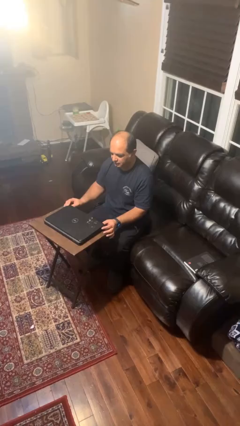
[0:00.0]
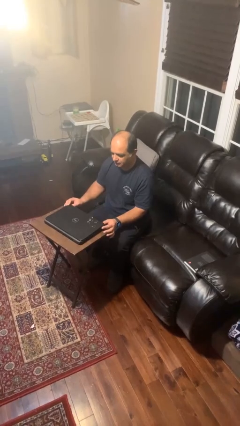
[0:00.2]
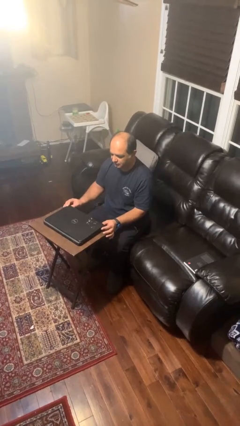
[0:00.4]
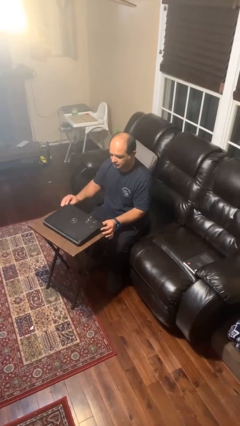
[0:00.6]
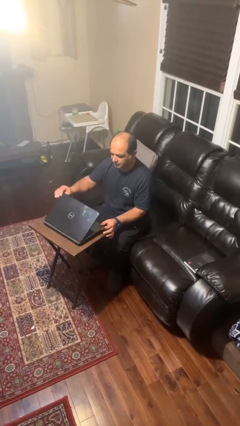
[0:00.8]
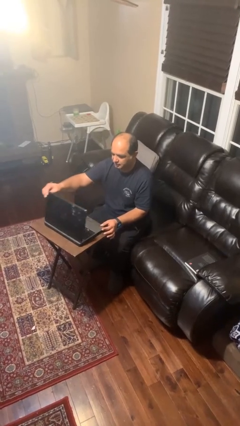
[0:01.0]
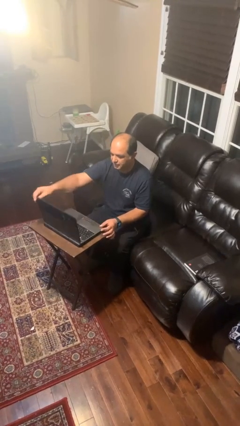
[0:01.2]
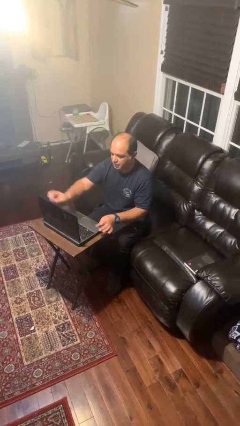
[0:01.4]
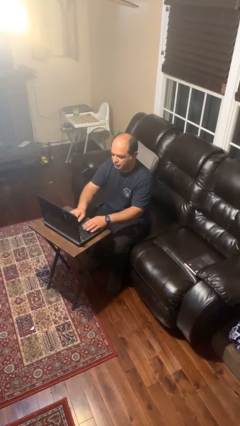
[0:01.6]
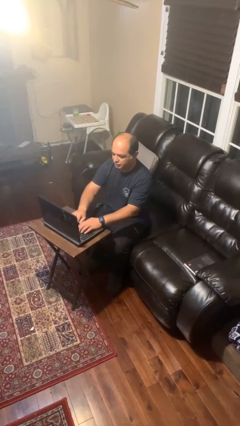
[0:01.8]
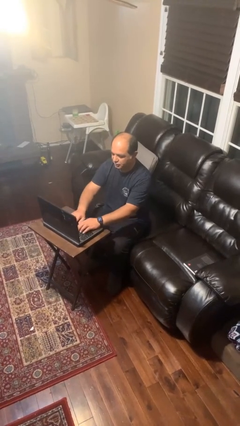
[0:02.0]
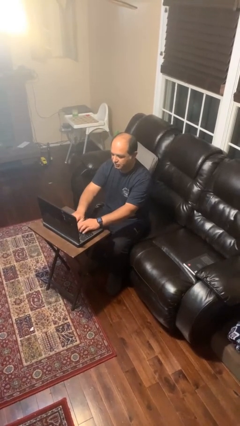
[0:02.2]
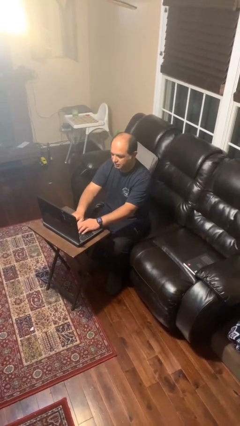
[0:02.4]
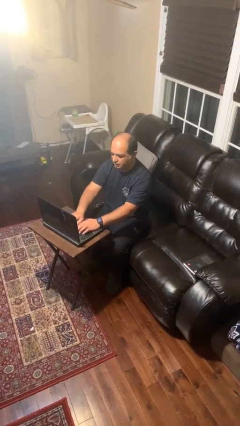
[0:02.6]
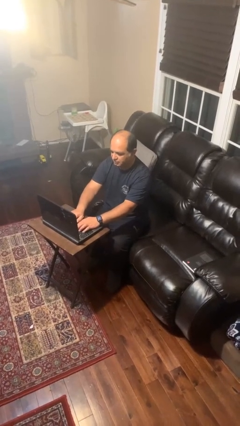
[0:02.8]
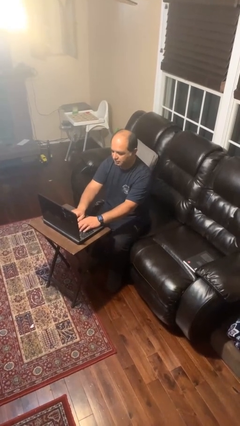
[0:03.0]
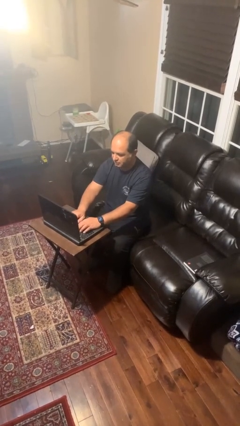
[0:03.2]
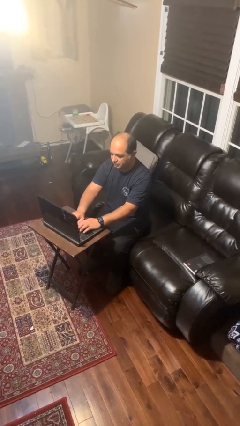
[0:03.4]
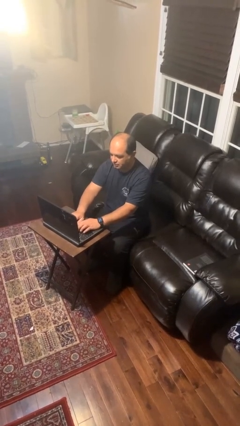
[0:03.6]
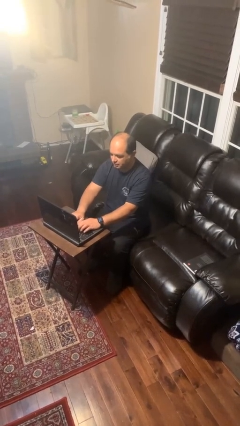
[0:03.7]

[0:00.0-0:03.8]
person interacts with laptop

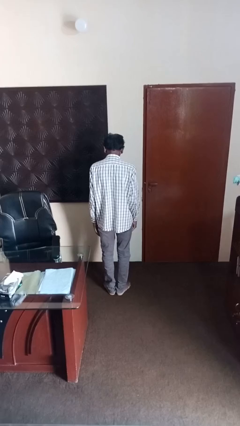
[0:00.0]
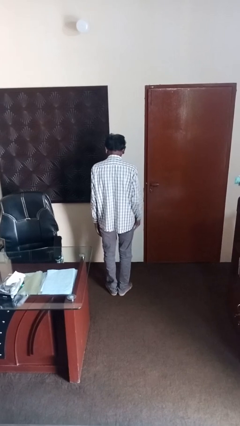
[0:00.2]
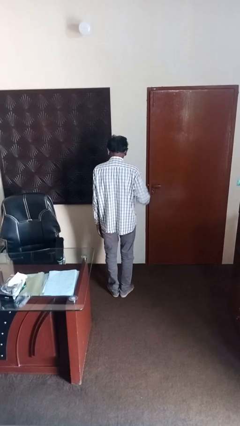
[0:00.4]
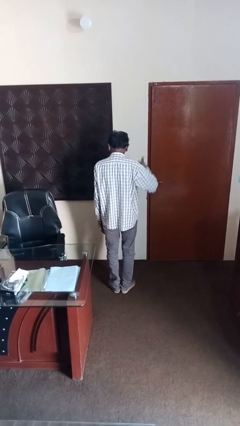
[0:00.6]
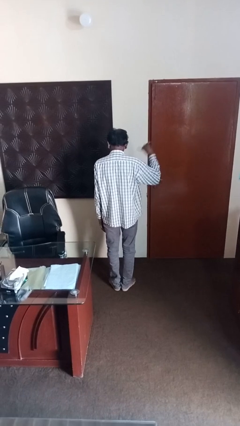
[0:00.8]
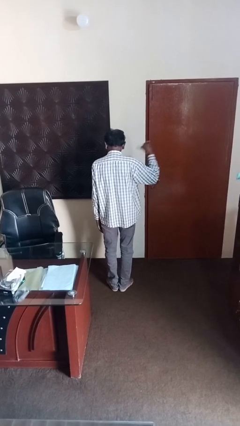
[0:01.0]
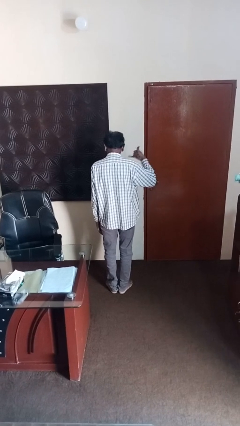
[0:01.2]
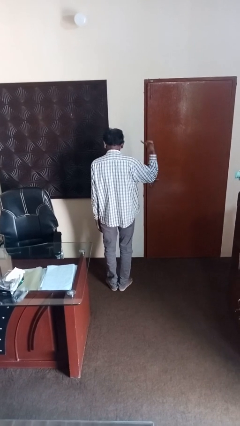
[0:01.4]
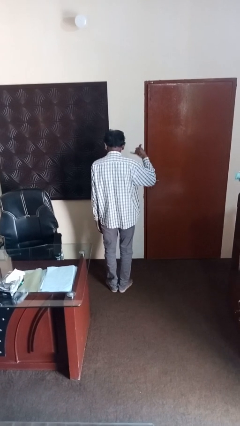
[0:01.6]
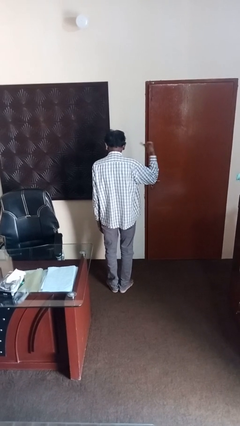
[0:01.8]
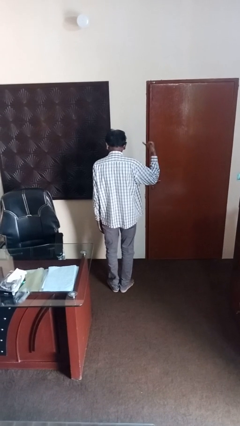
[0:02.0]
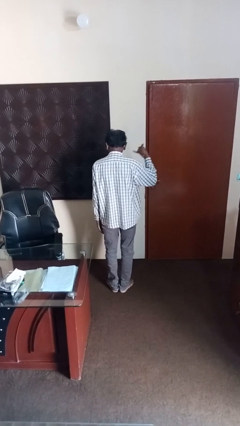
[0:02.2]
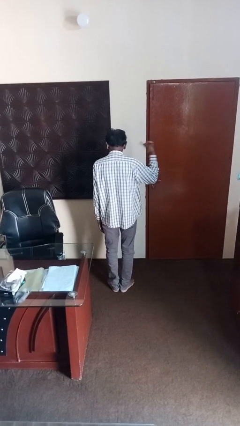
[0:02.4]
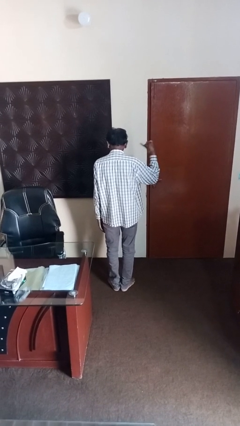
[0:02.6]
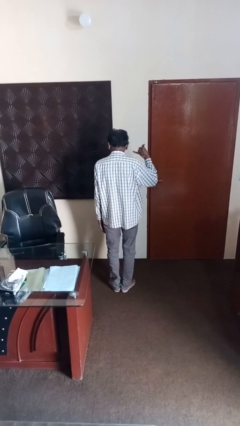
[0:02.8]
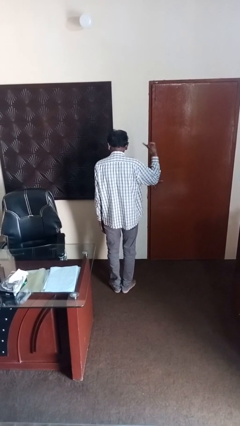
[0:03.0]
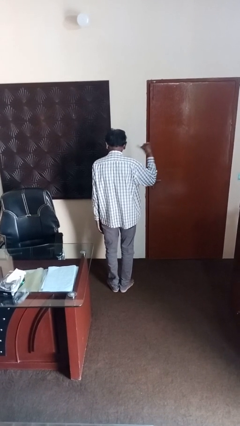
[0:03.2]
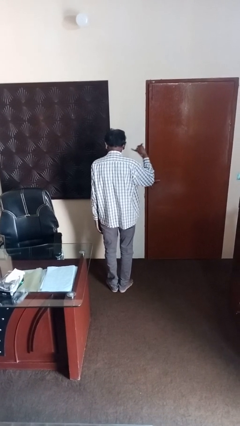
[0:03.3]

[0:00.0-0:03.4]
person gestures hang loose

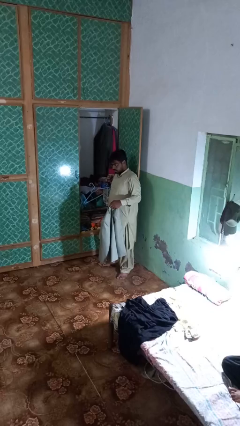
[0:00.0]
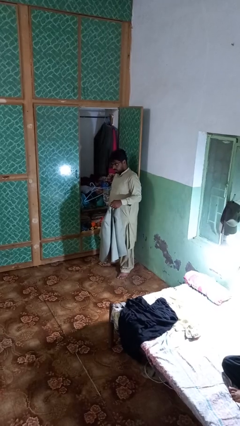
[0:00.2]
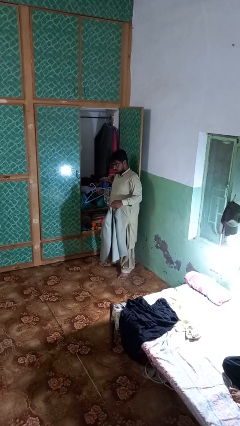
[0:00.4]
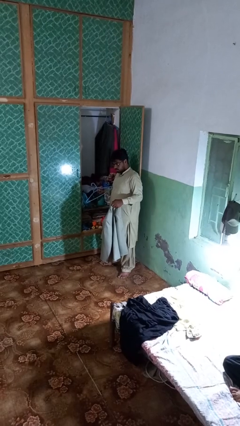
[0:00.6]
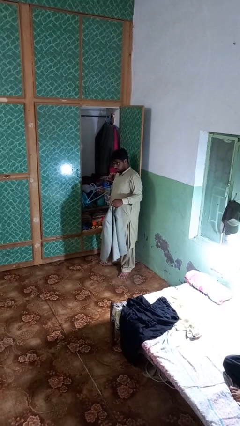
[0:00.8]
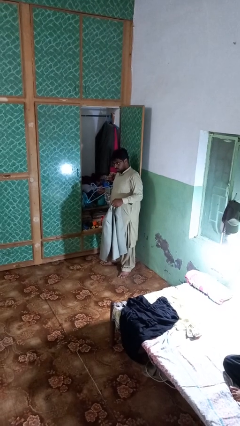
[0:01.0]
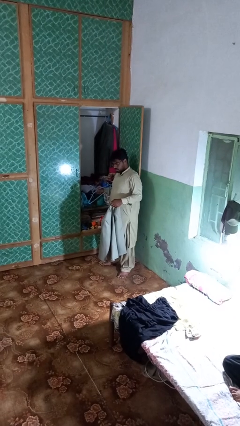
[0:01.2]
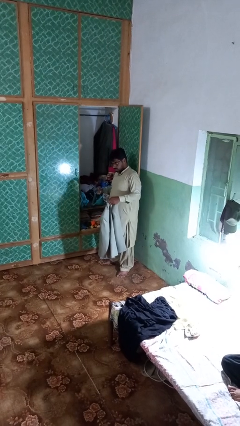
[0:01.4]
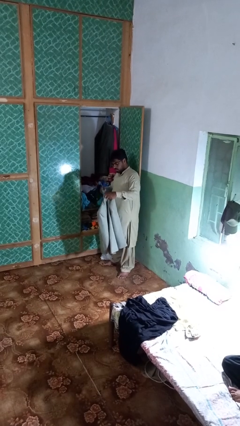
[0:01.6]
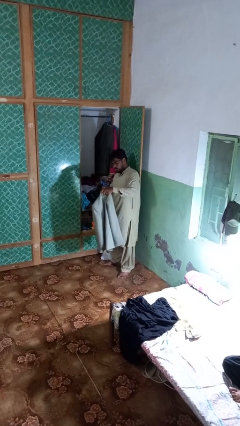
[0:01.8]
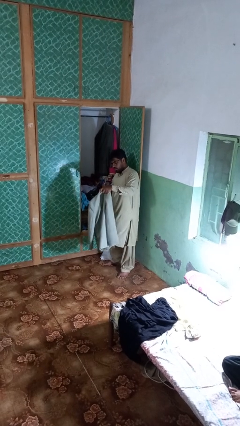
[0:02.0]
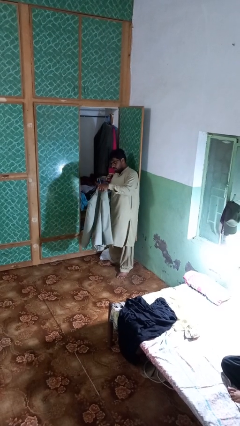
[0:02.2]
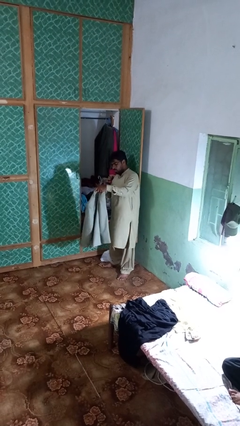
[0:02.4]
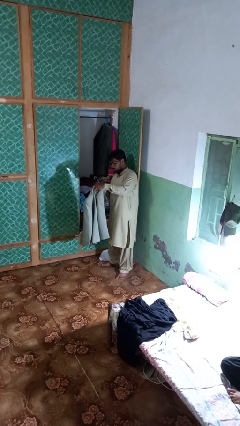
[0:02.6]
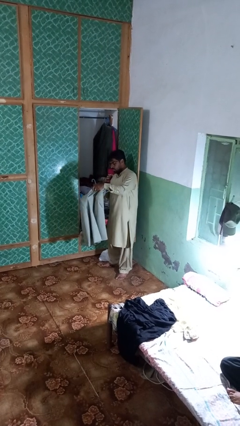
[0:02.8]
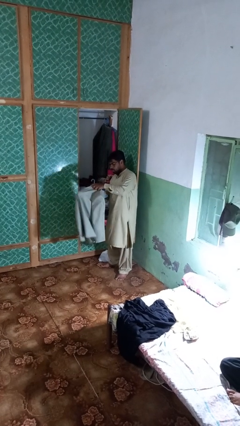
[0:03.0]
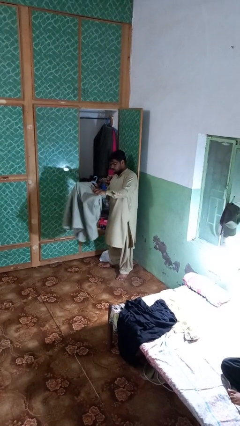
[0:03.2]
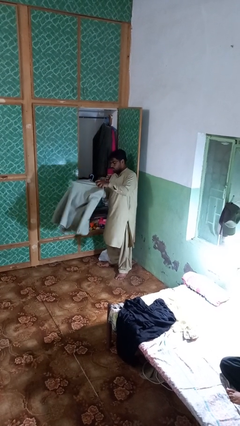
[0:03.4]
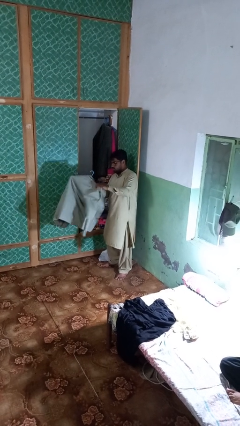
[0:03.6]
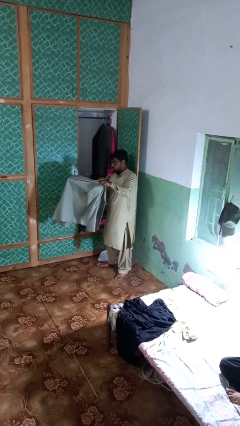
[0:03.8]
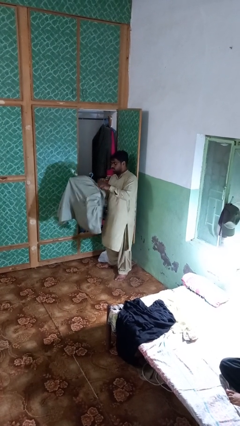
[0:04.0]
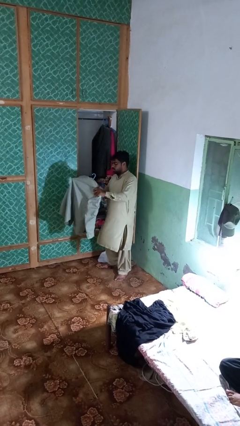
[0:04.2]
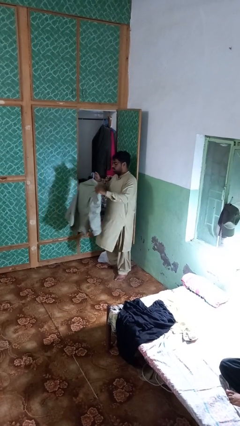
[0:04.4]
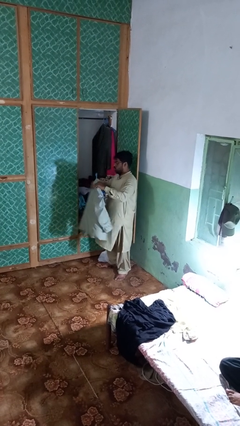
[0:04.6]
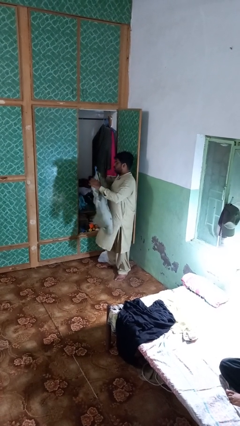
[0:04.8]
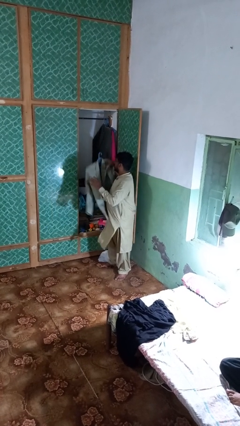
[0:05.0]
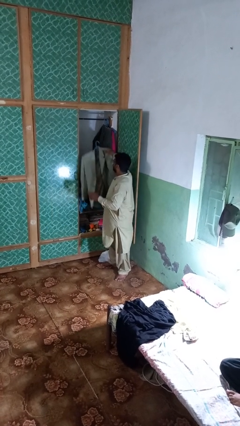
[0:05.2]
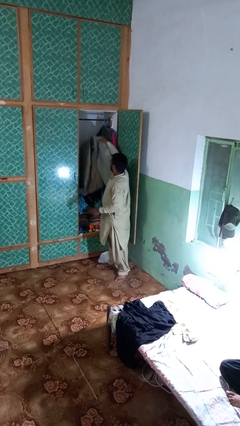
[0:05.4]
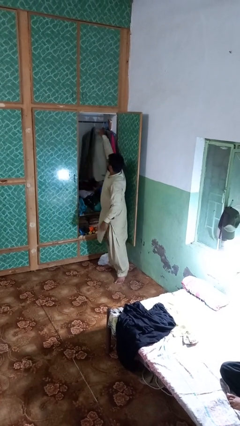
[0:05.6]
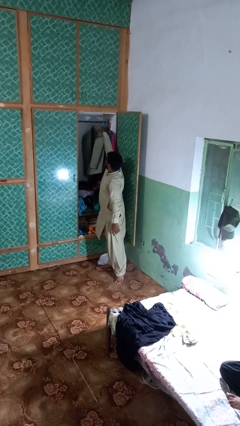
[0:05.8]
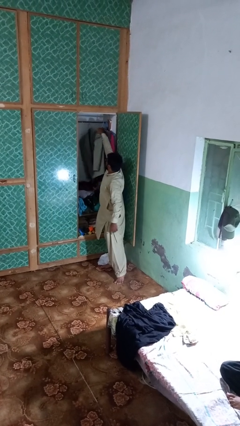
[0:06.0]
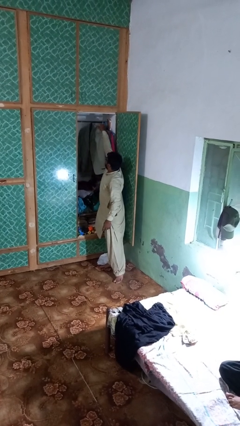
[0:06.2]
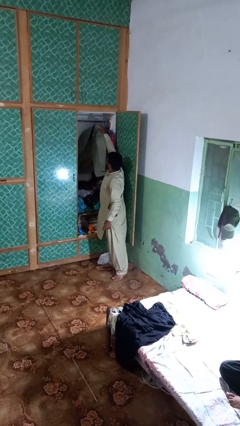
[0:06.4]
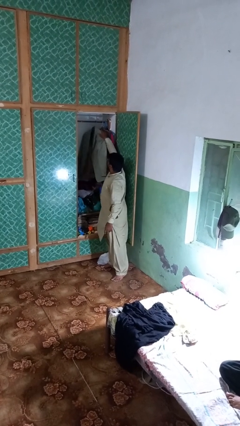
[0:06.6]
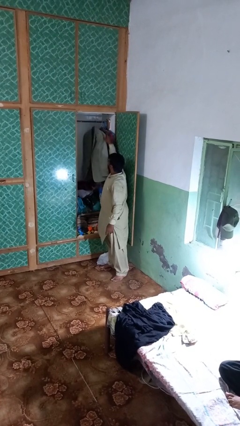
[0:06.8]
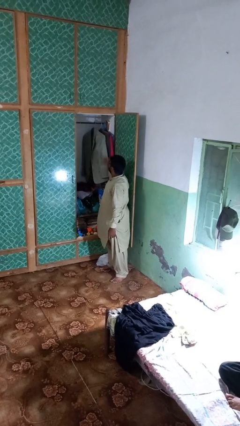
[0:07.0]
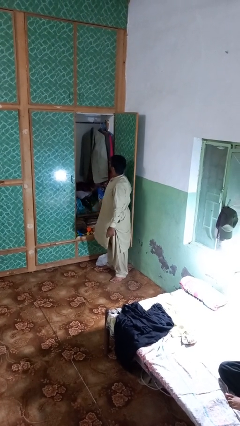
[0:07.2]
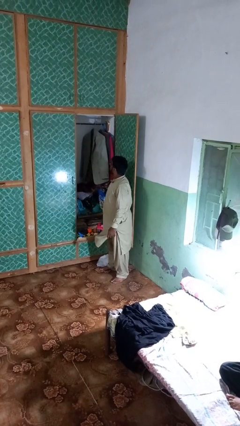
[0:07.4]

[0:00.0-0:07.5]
person puts clothes into closet

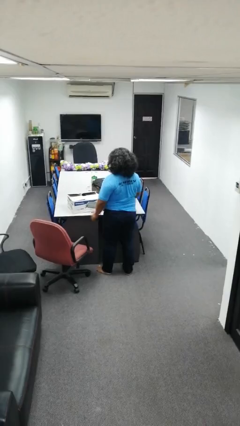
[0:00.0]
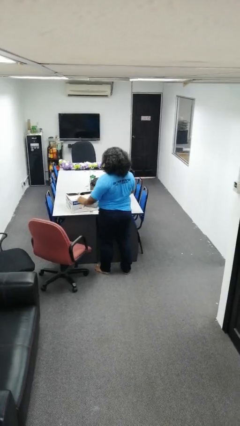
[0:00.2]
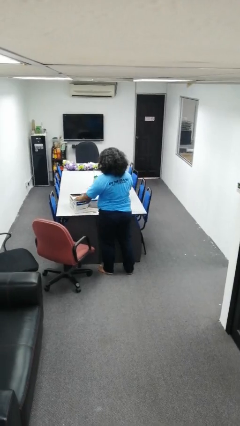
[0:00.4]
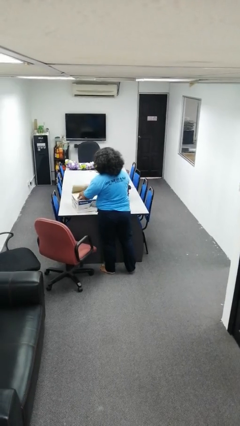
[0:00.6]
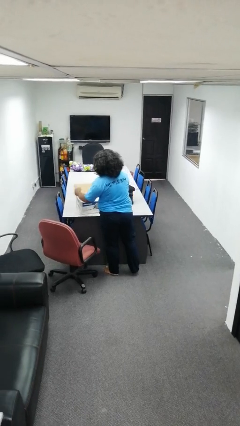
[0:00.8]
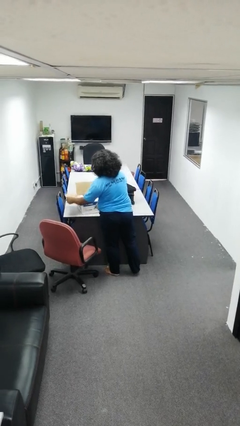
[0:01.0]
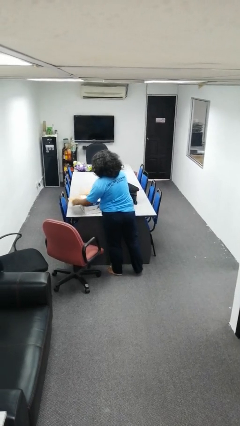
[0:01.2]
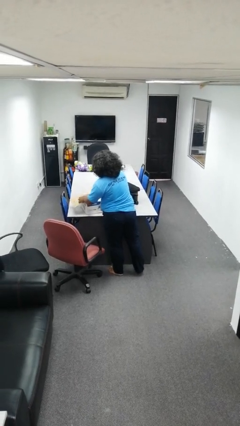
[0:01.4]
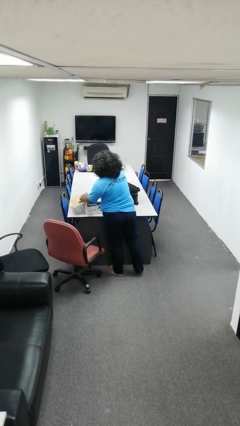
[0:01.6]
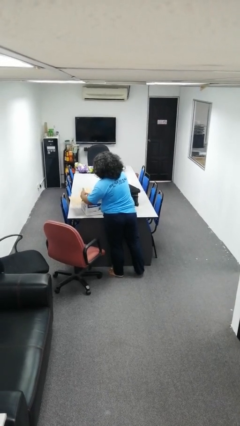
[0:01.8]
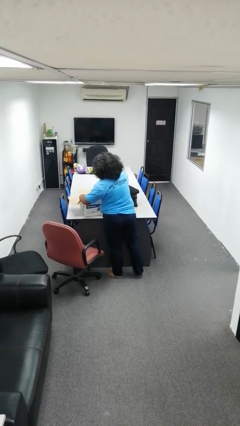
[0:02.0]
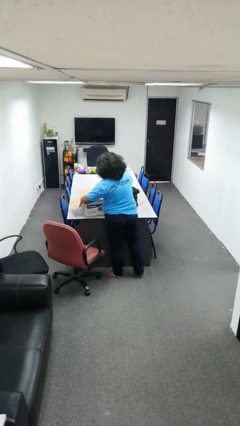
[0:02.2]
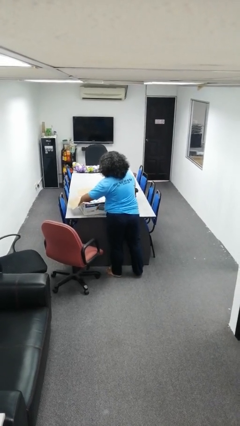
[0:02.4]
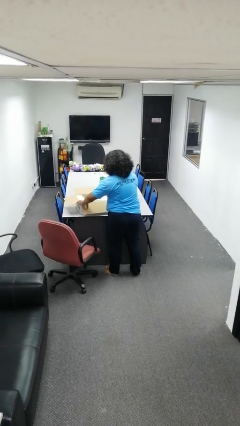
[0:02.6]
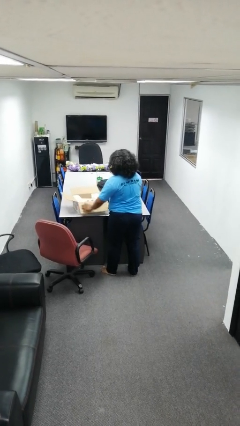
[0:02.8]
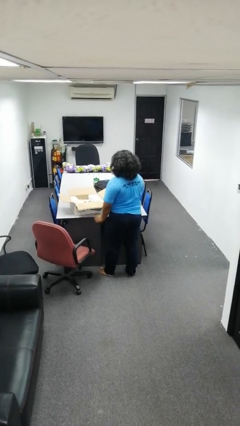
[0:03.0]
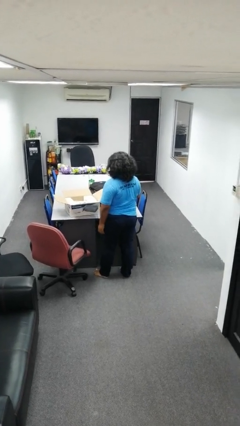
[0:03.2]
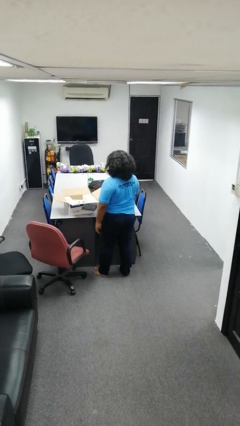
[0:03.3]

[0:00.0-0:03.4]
person opens box
